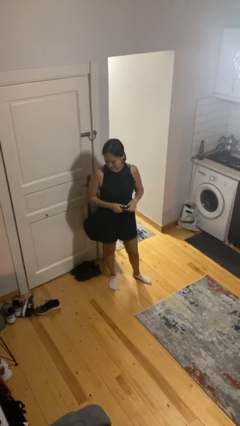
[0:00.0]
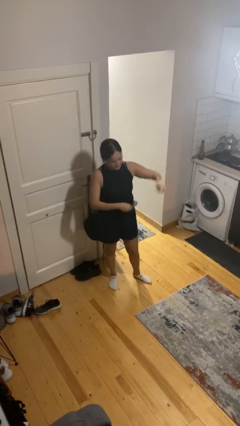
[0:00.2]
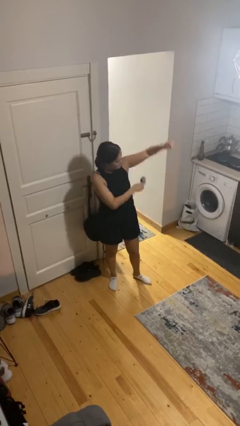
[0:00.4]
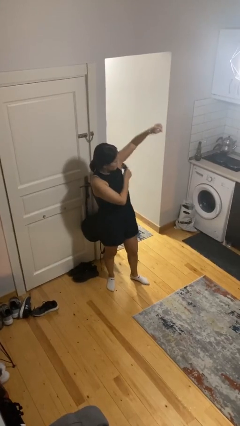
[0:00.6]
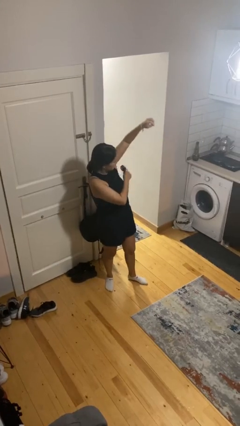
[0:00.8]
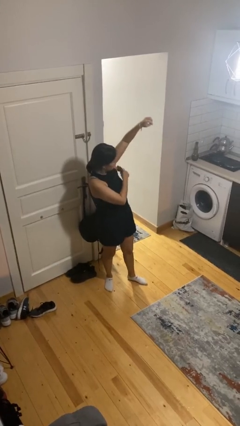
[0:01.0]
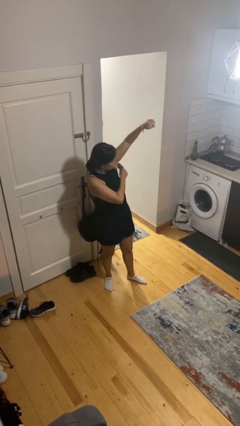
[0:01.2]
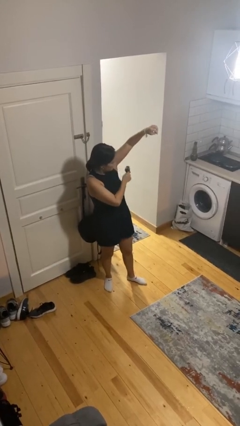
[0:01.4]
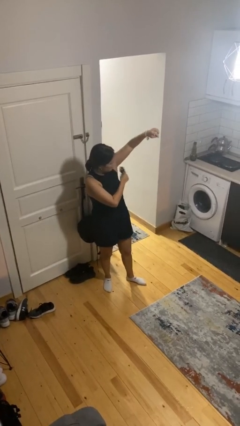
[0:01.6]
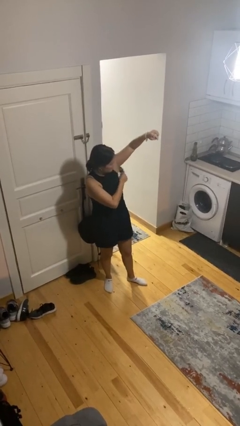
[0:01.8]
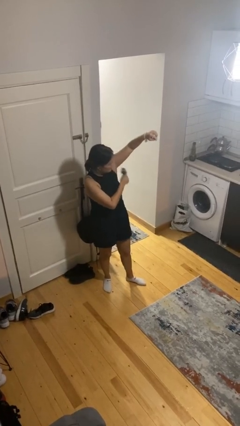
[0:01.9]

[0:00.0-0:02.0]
person applies deodorant

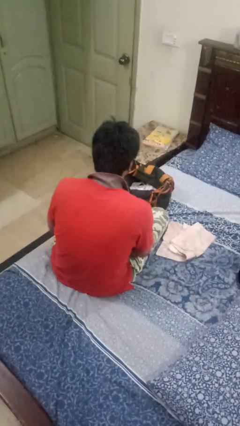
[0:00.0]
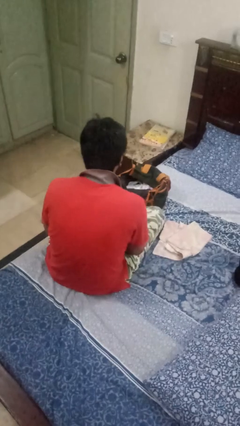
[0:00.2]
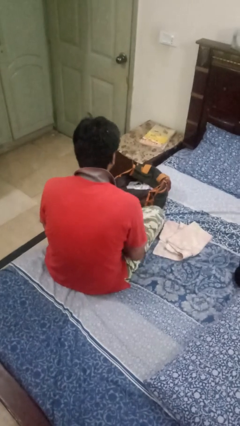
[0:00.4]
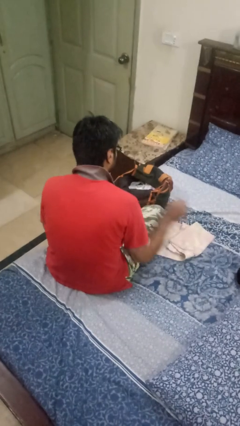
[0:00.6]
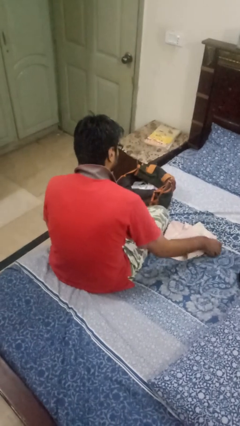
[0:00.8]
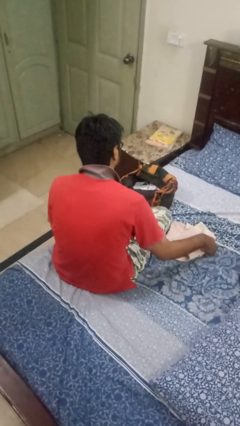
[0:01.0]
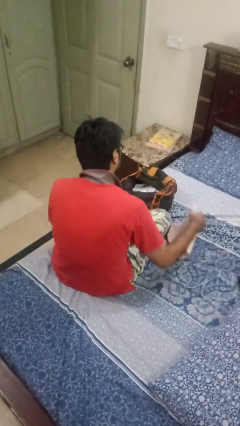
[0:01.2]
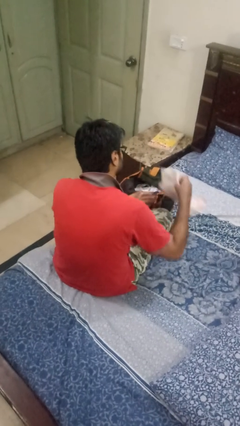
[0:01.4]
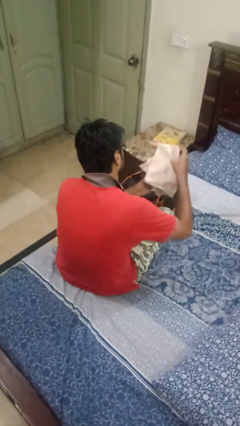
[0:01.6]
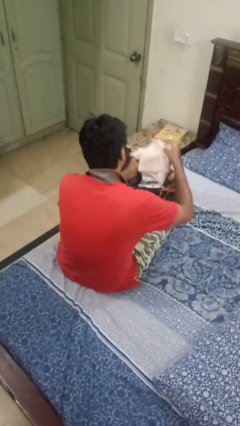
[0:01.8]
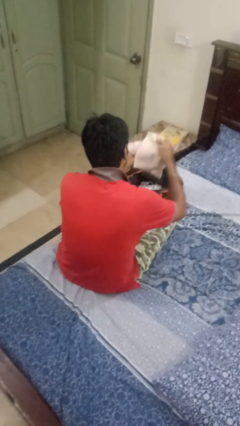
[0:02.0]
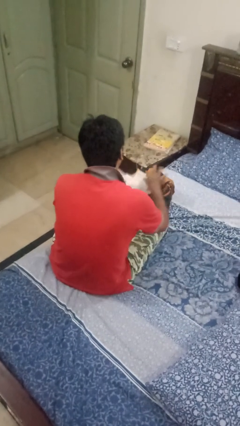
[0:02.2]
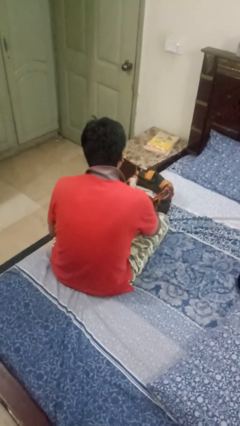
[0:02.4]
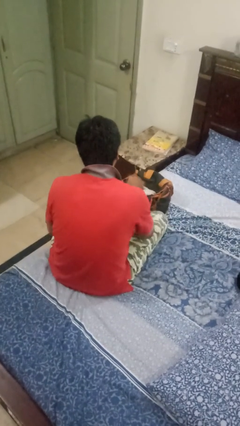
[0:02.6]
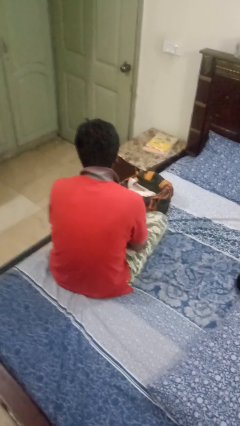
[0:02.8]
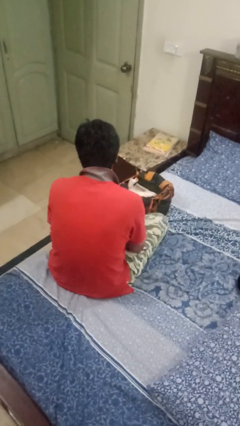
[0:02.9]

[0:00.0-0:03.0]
person puts object into bag

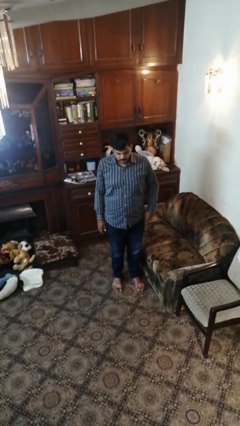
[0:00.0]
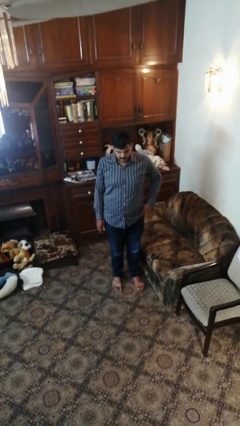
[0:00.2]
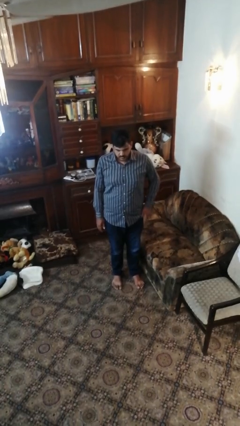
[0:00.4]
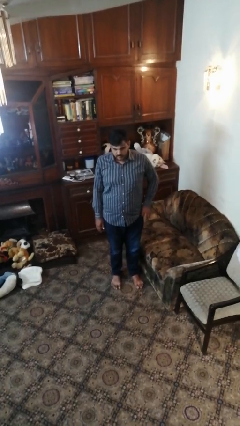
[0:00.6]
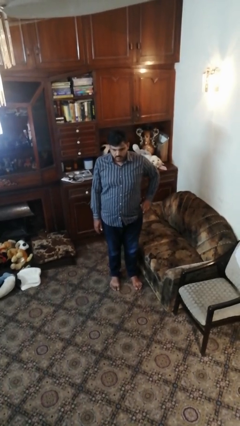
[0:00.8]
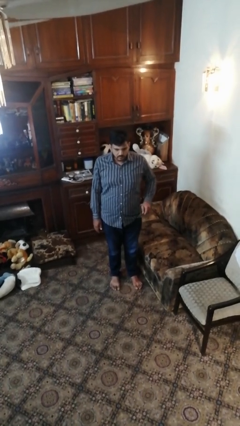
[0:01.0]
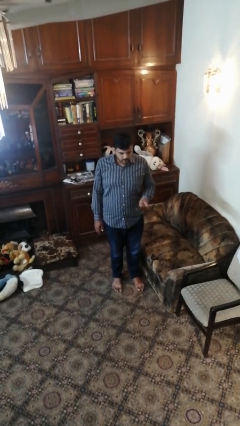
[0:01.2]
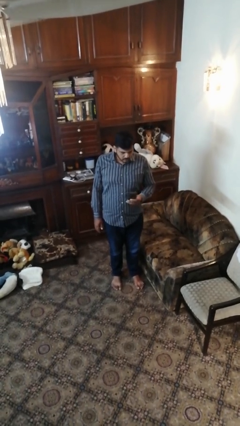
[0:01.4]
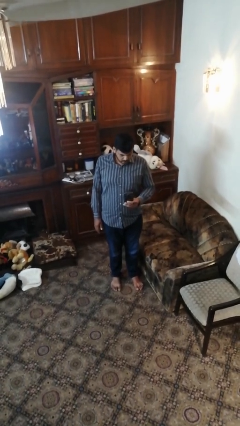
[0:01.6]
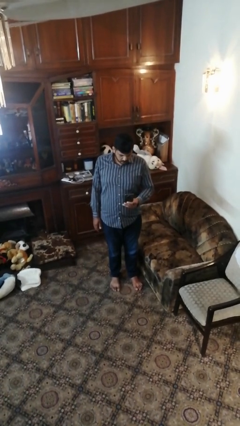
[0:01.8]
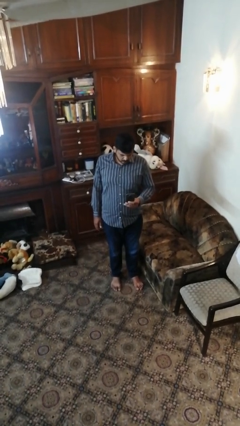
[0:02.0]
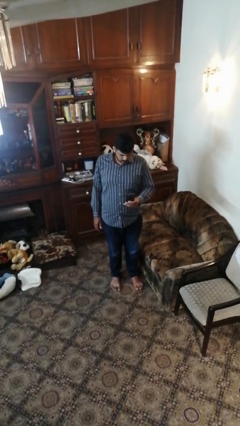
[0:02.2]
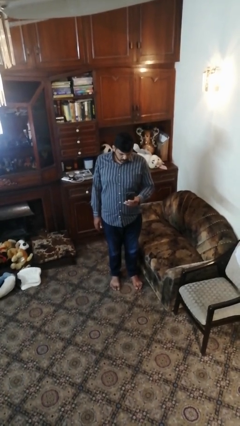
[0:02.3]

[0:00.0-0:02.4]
person takes phone from pocket

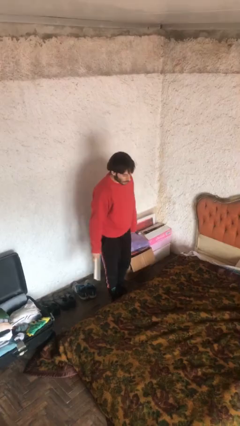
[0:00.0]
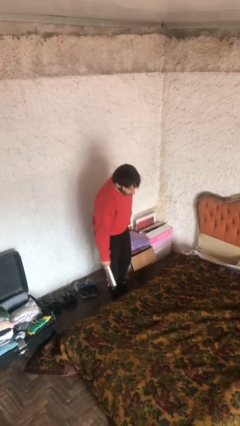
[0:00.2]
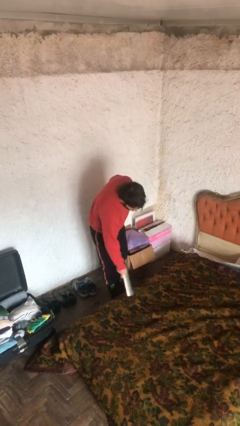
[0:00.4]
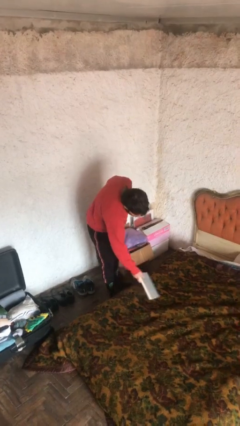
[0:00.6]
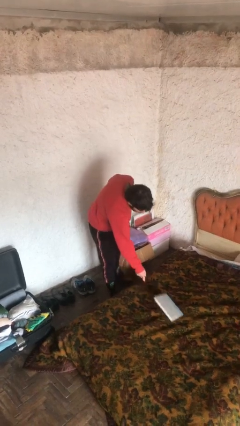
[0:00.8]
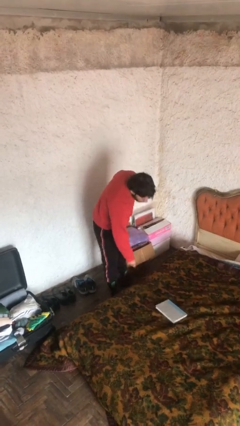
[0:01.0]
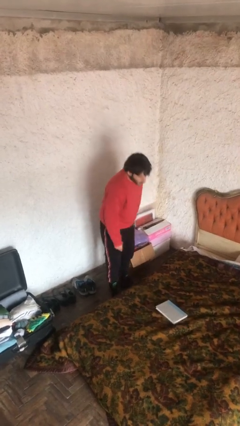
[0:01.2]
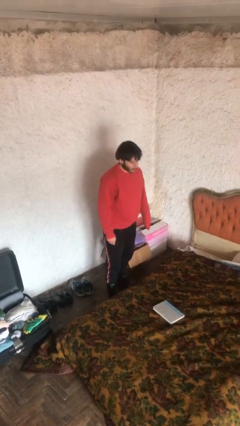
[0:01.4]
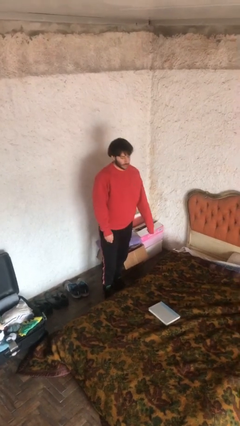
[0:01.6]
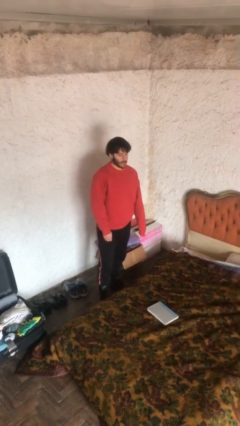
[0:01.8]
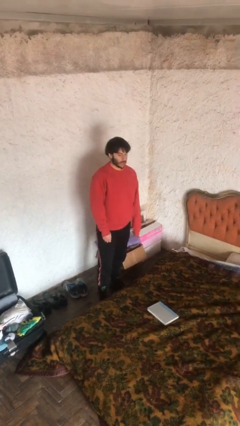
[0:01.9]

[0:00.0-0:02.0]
person puts down object on bed

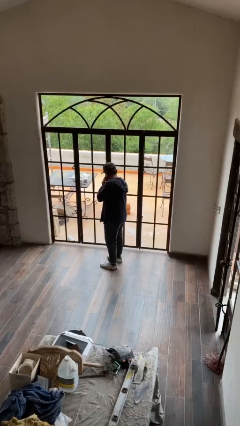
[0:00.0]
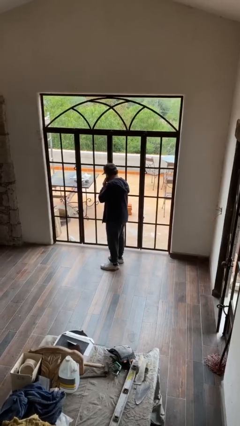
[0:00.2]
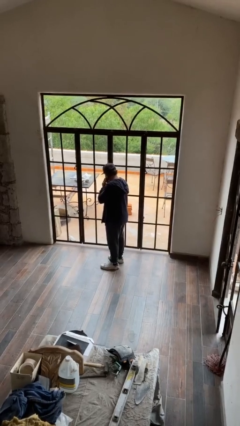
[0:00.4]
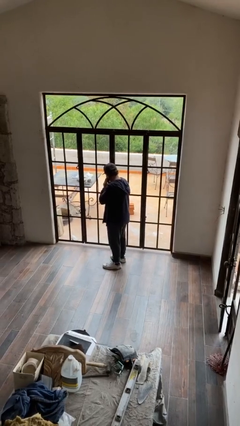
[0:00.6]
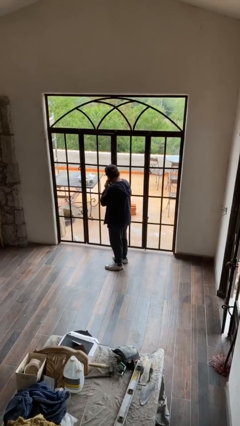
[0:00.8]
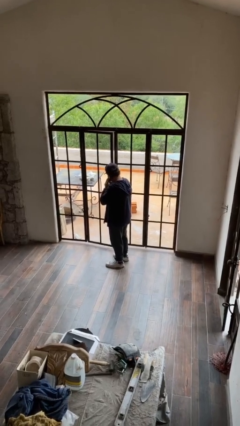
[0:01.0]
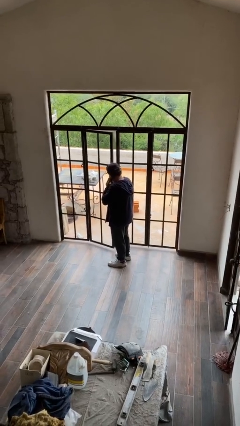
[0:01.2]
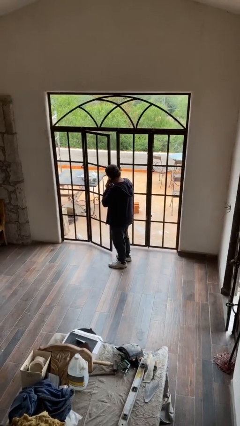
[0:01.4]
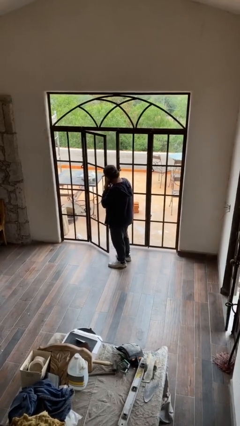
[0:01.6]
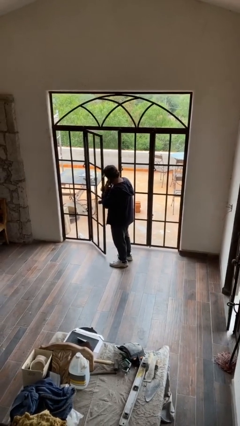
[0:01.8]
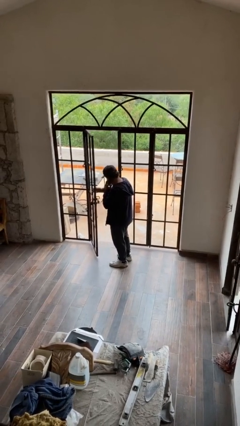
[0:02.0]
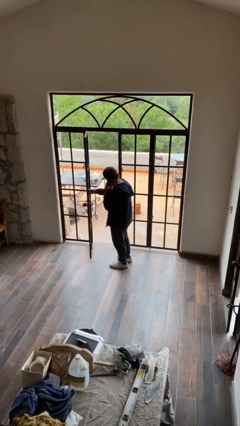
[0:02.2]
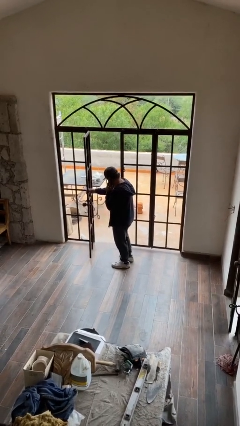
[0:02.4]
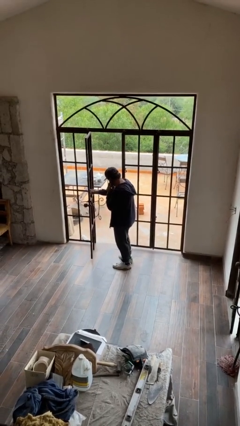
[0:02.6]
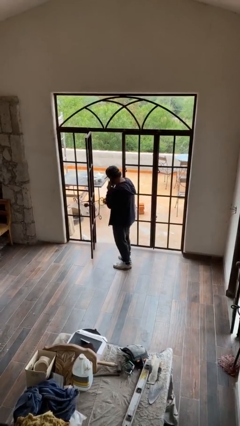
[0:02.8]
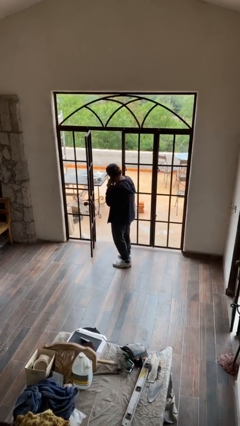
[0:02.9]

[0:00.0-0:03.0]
person opens facility door

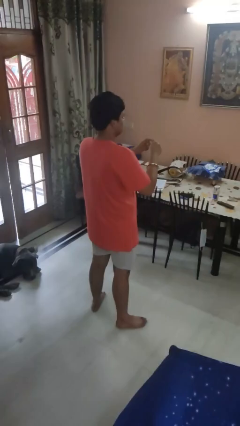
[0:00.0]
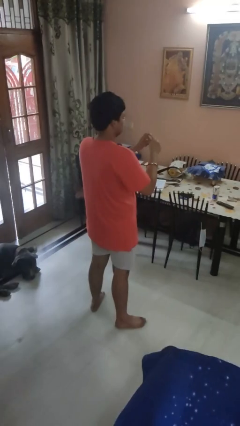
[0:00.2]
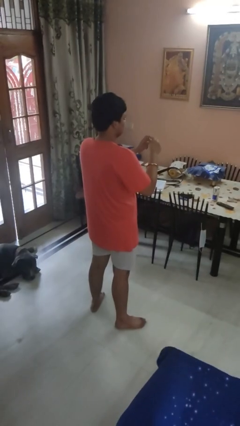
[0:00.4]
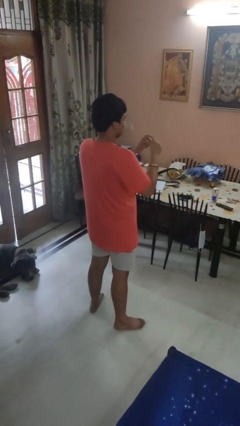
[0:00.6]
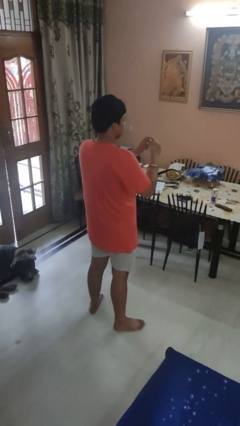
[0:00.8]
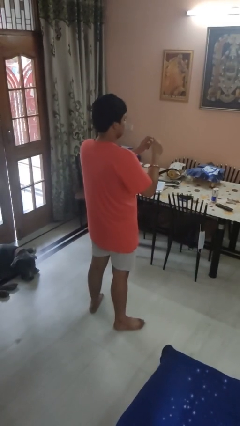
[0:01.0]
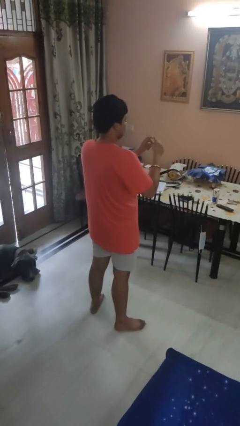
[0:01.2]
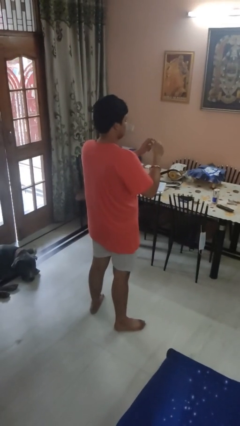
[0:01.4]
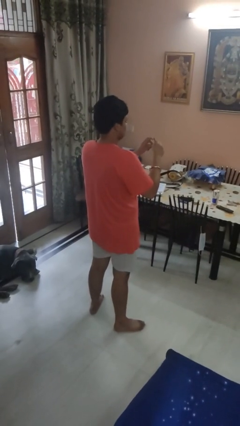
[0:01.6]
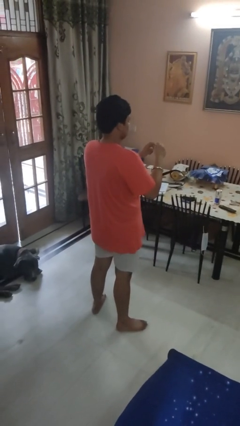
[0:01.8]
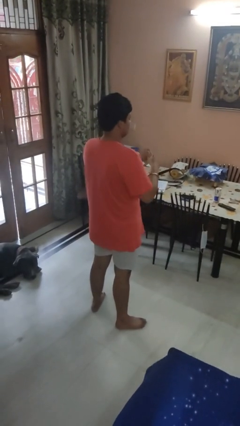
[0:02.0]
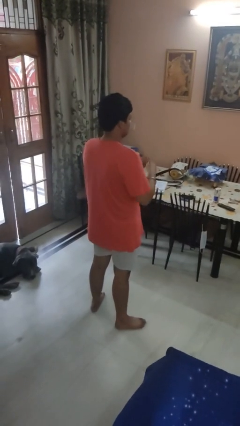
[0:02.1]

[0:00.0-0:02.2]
person files fingernails

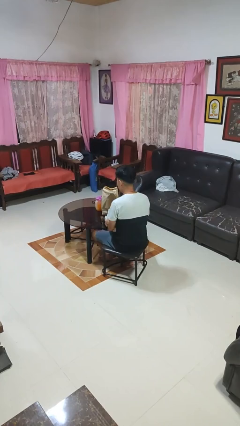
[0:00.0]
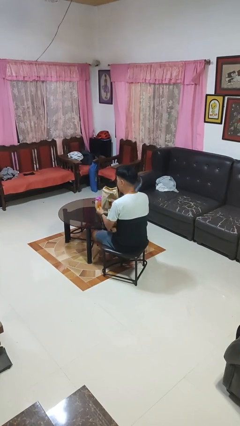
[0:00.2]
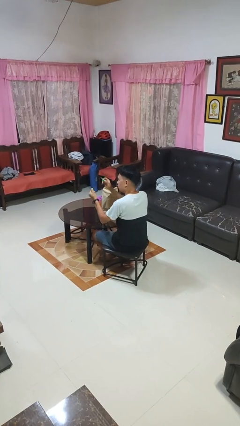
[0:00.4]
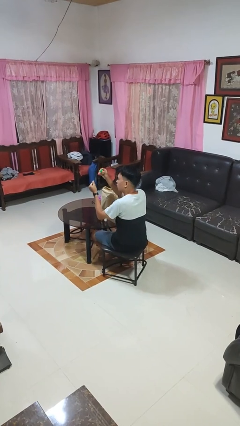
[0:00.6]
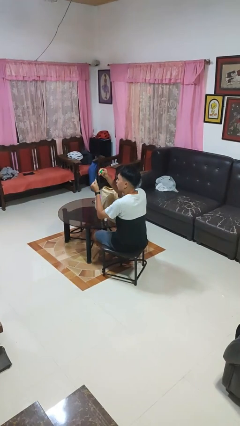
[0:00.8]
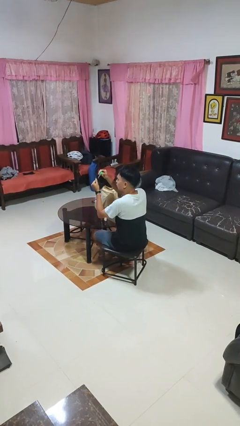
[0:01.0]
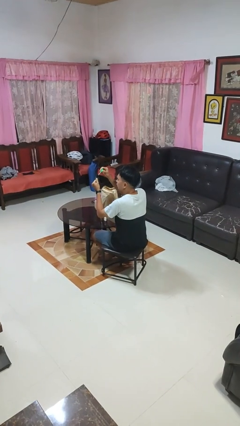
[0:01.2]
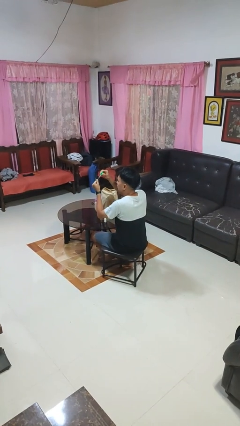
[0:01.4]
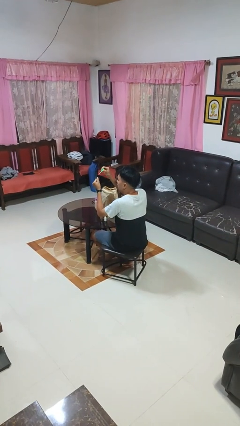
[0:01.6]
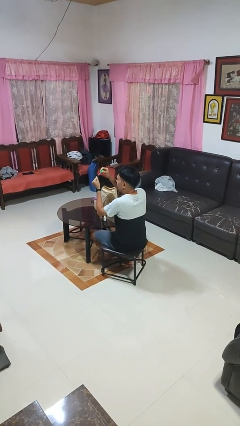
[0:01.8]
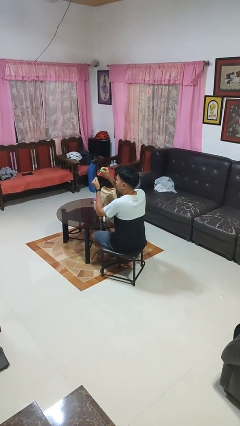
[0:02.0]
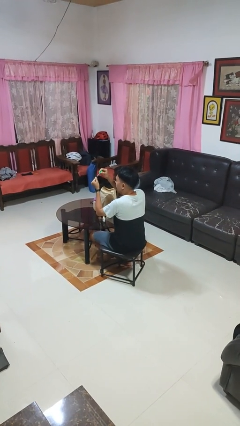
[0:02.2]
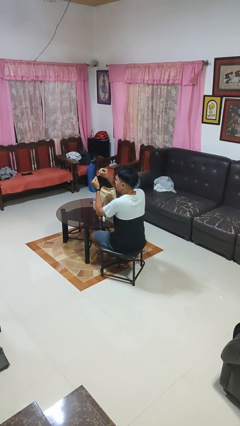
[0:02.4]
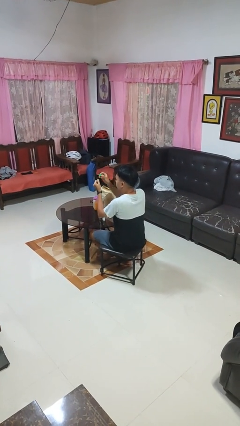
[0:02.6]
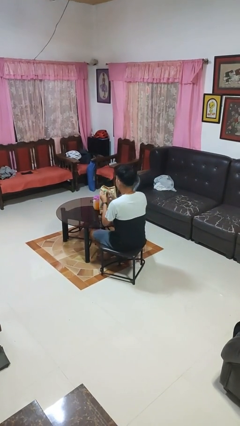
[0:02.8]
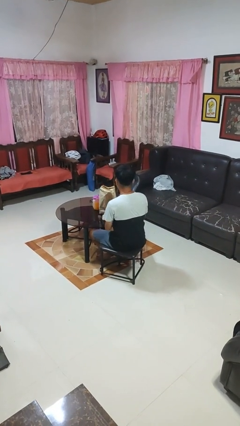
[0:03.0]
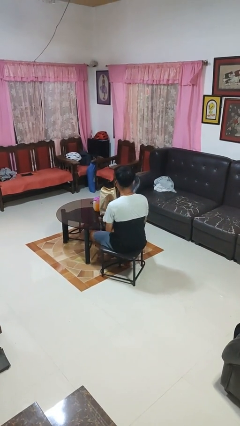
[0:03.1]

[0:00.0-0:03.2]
person paints fingernails
